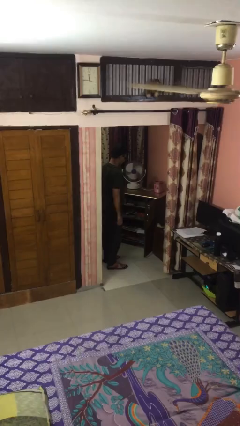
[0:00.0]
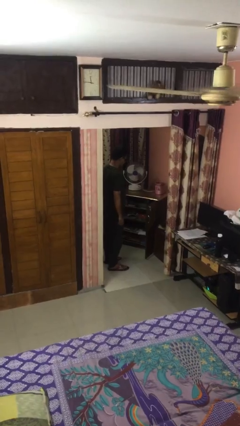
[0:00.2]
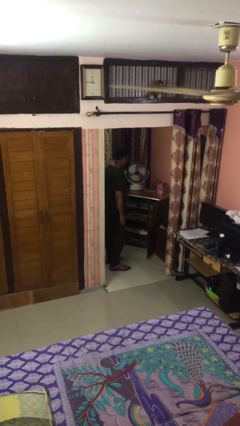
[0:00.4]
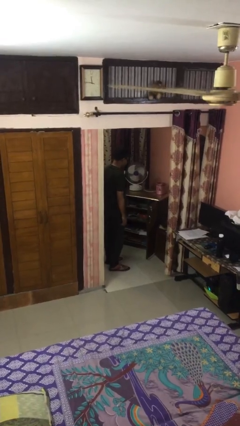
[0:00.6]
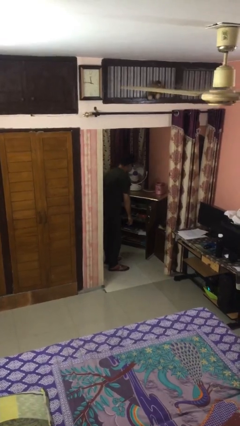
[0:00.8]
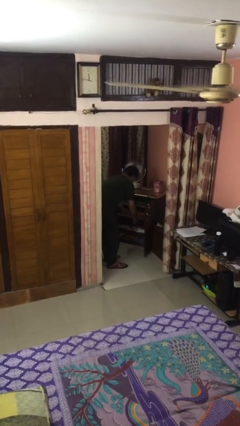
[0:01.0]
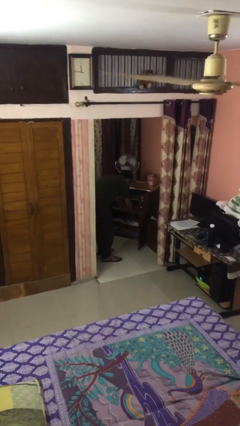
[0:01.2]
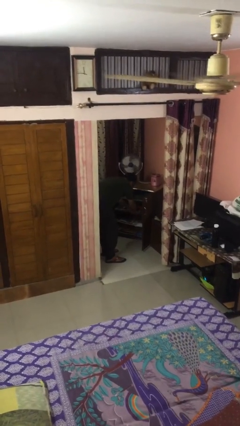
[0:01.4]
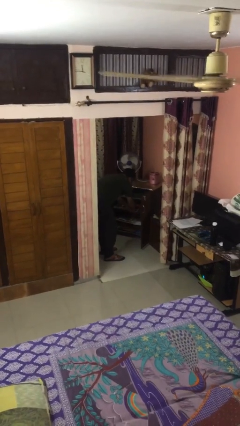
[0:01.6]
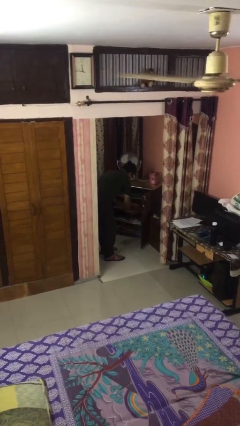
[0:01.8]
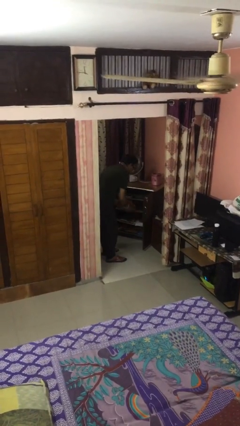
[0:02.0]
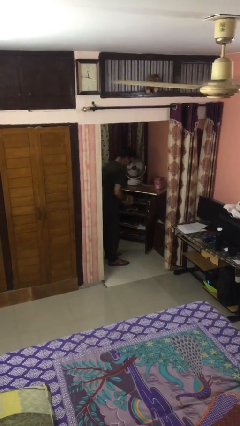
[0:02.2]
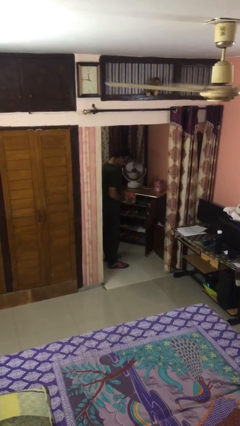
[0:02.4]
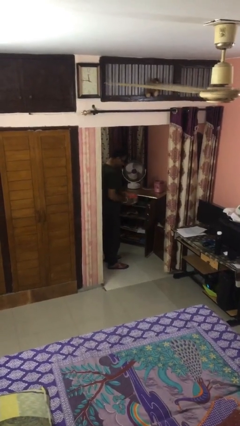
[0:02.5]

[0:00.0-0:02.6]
person picks up object from cabinet

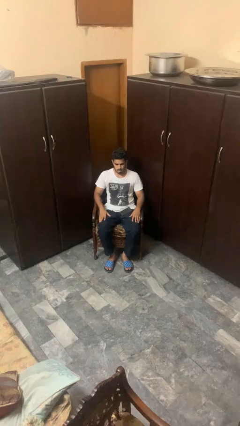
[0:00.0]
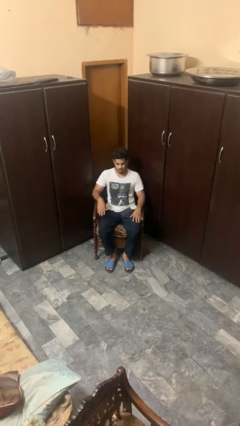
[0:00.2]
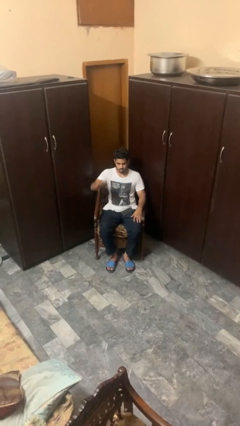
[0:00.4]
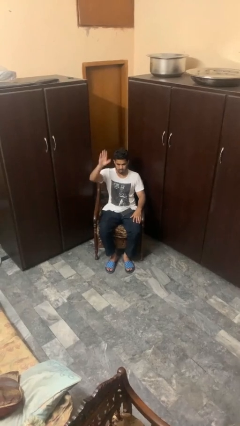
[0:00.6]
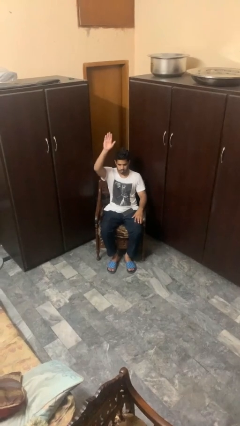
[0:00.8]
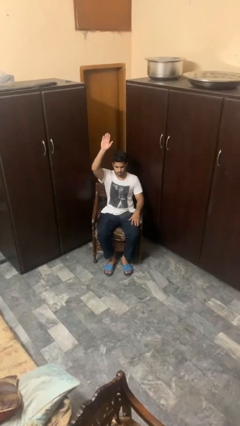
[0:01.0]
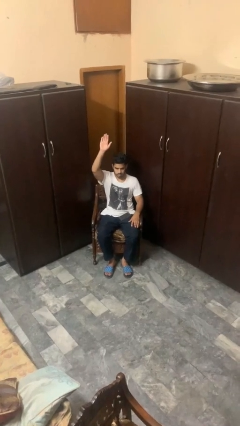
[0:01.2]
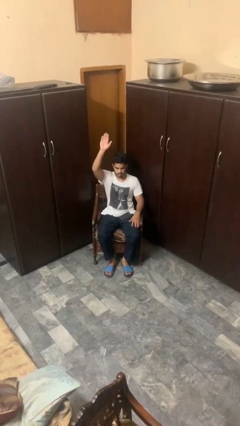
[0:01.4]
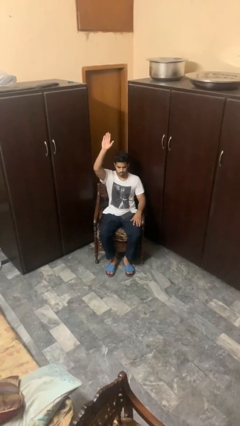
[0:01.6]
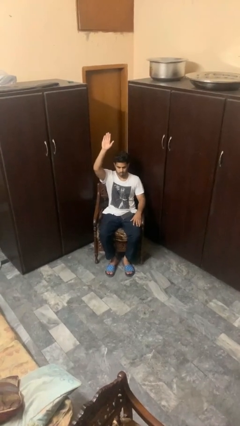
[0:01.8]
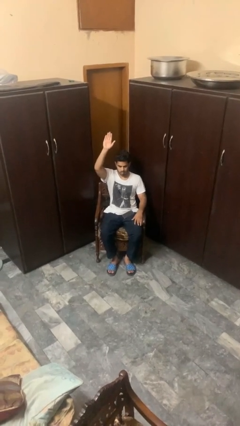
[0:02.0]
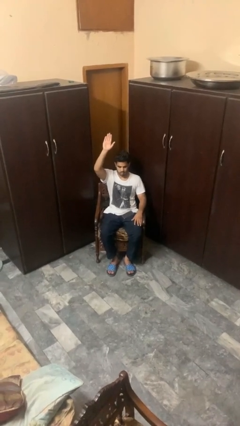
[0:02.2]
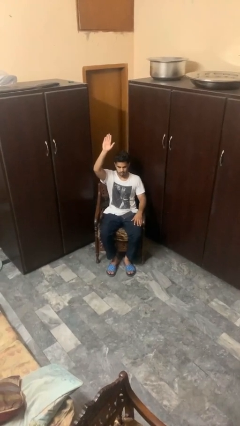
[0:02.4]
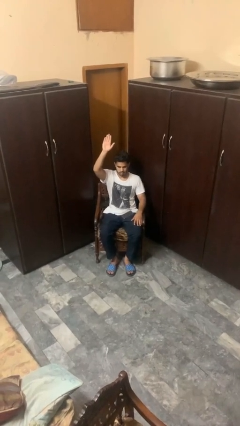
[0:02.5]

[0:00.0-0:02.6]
person gestures raise hand

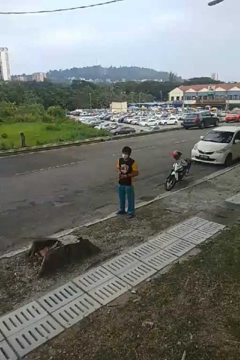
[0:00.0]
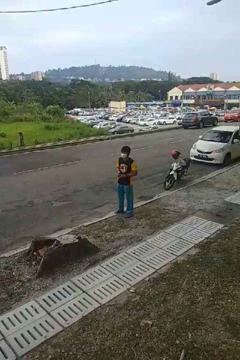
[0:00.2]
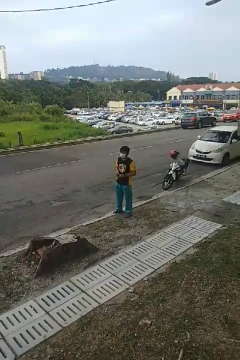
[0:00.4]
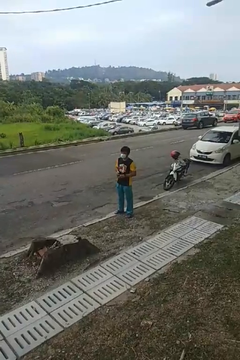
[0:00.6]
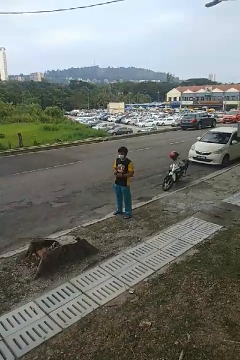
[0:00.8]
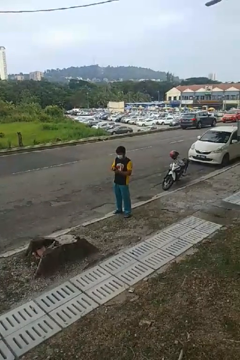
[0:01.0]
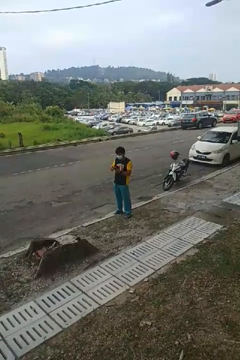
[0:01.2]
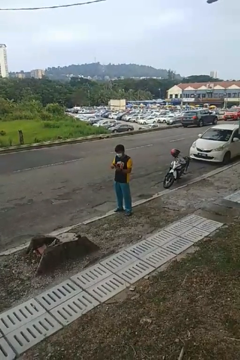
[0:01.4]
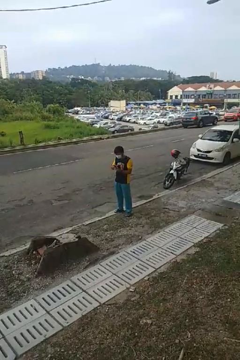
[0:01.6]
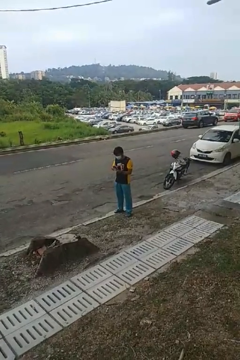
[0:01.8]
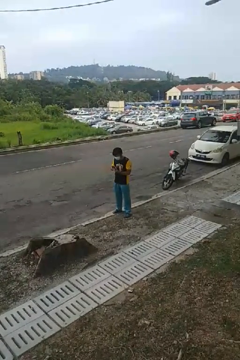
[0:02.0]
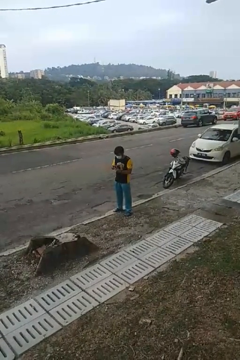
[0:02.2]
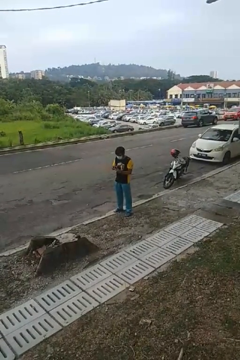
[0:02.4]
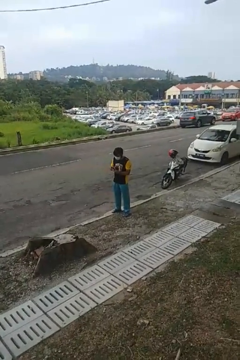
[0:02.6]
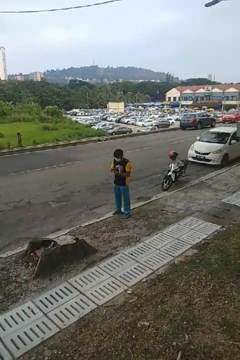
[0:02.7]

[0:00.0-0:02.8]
person searches in purse

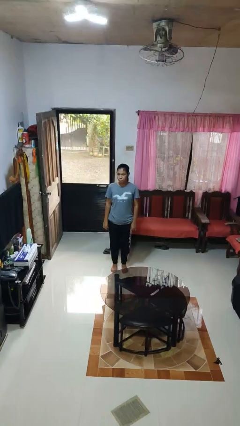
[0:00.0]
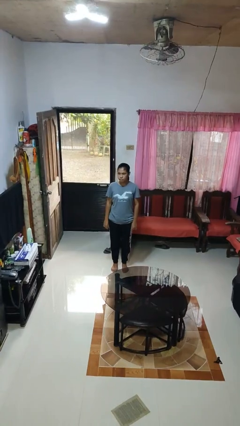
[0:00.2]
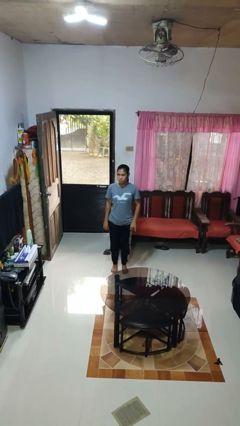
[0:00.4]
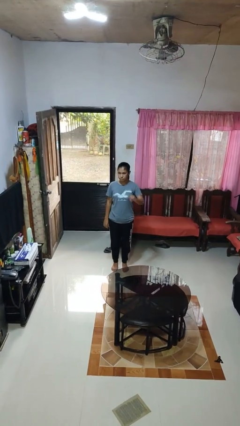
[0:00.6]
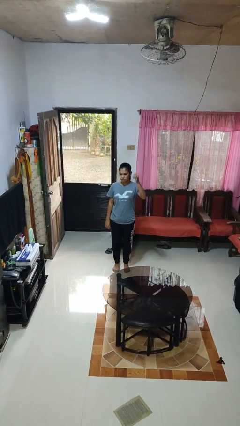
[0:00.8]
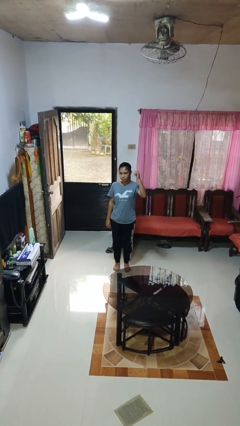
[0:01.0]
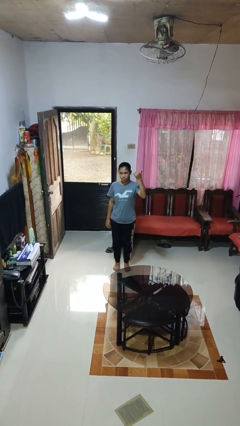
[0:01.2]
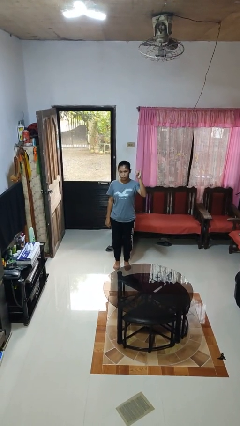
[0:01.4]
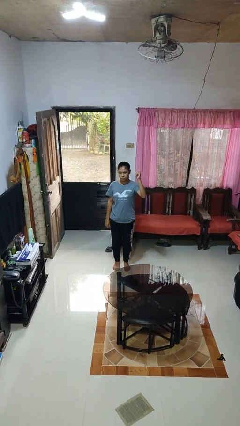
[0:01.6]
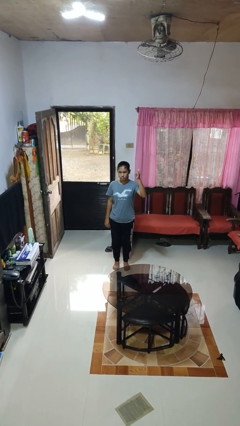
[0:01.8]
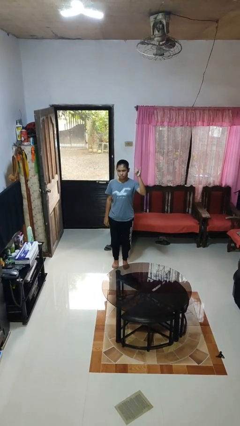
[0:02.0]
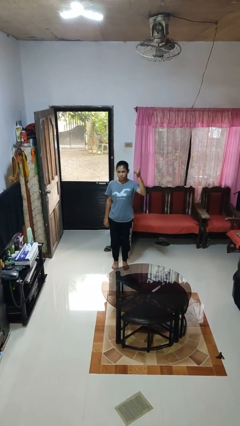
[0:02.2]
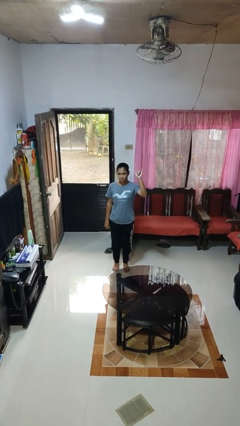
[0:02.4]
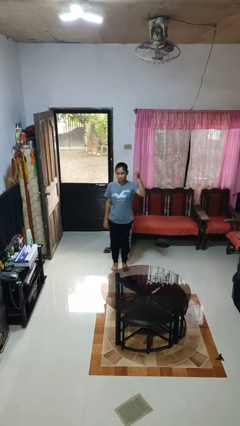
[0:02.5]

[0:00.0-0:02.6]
person gestures hang loose

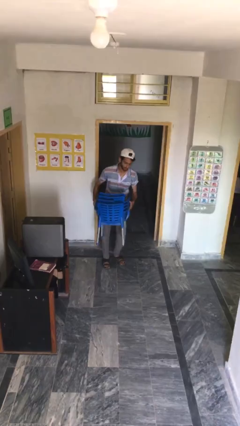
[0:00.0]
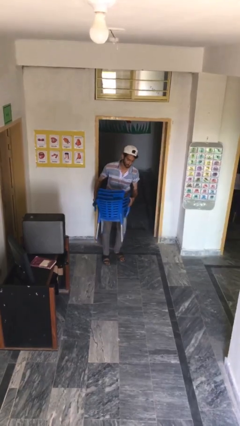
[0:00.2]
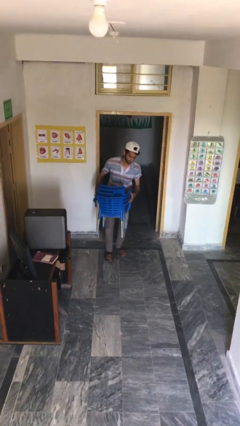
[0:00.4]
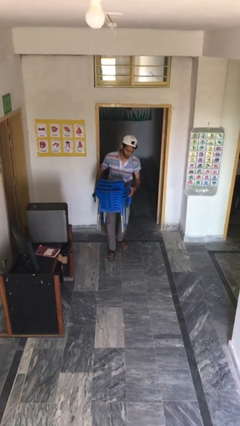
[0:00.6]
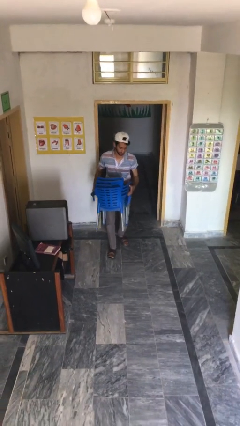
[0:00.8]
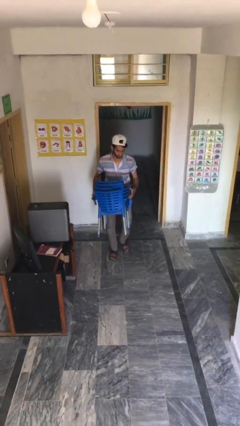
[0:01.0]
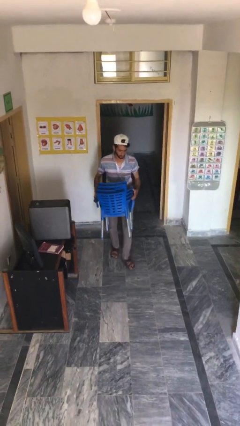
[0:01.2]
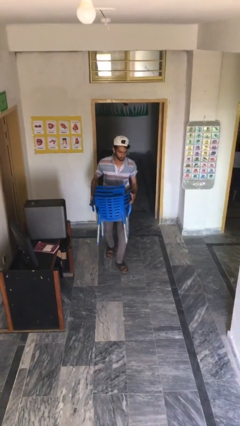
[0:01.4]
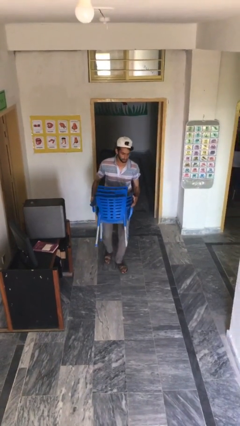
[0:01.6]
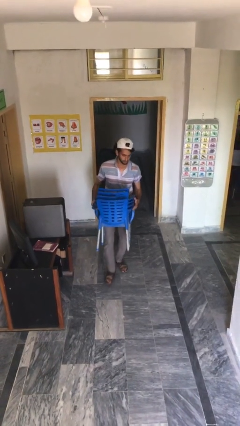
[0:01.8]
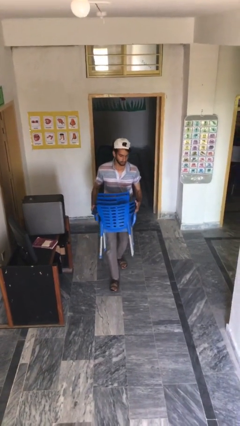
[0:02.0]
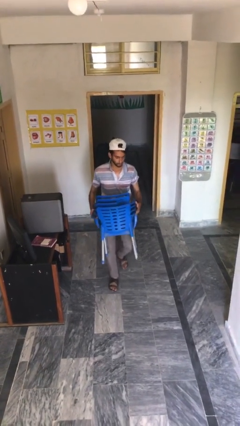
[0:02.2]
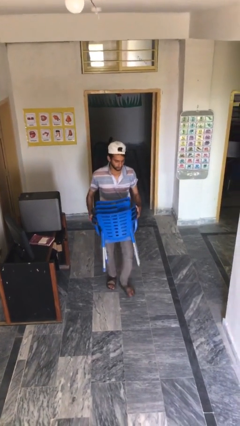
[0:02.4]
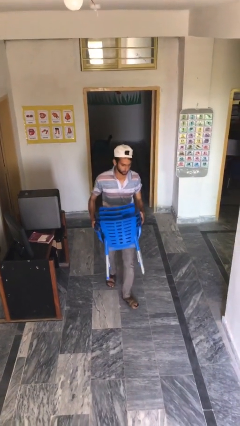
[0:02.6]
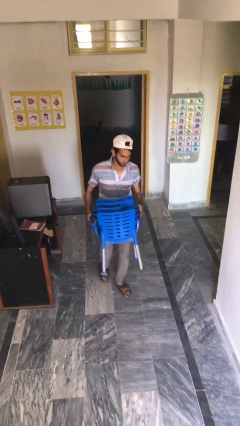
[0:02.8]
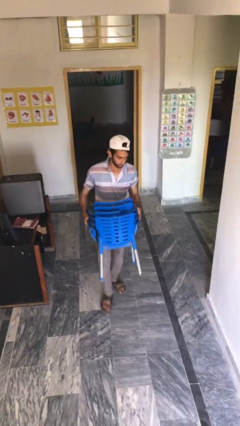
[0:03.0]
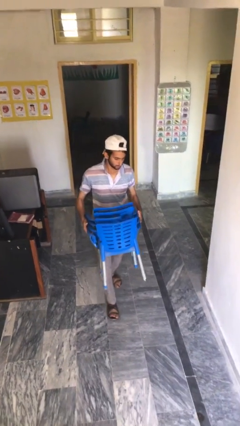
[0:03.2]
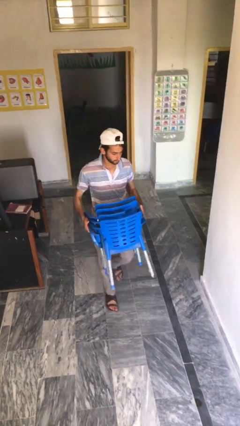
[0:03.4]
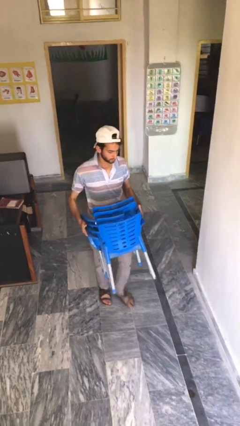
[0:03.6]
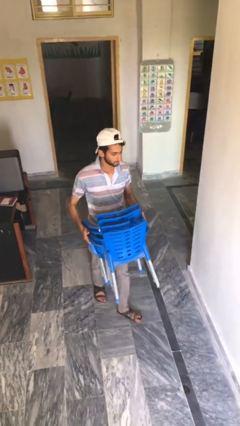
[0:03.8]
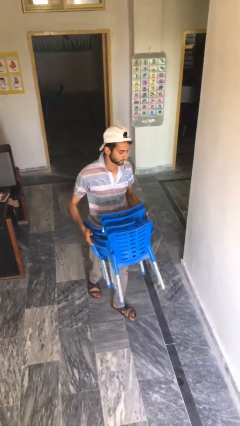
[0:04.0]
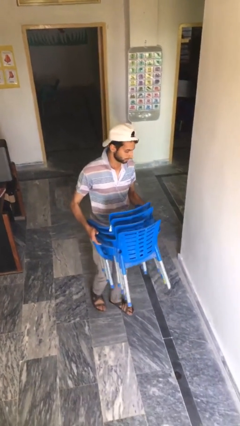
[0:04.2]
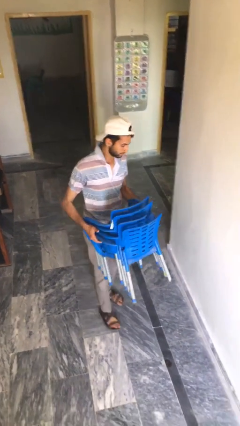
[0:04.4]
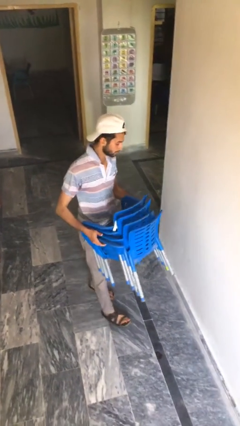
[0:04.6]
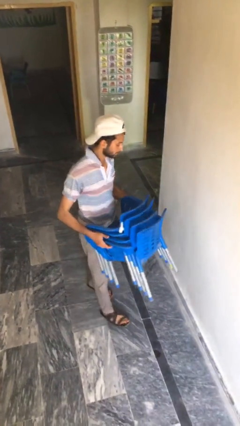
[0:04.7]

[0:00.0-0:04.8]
person carries heavy object

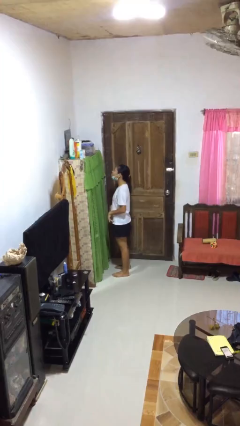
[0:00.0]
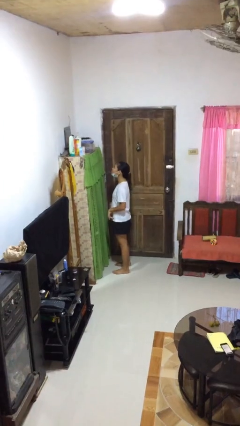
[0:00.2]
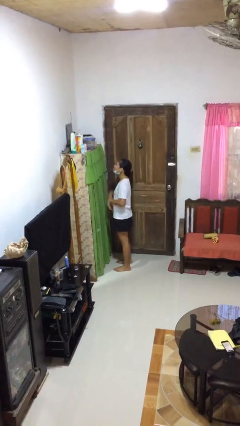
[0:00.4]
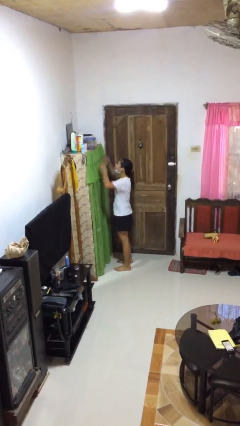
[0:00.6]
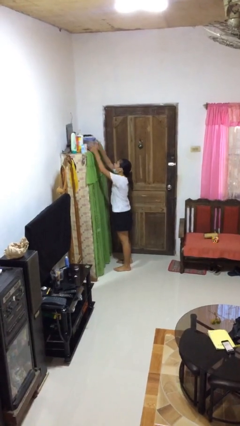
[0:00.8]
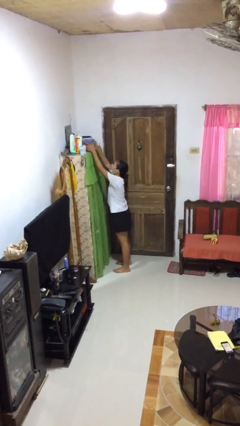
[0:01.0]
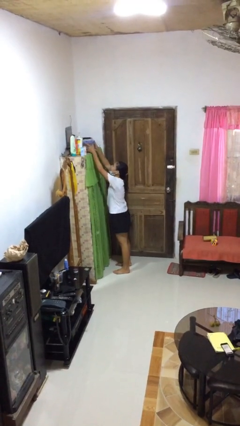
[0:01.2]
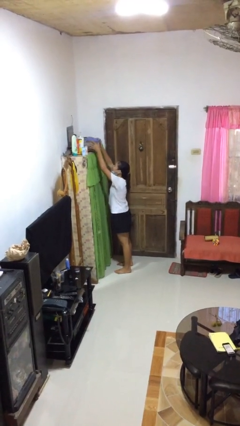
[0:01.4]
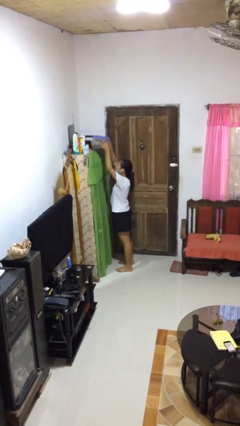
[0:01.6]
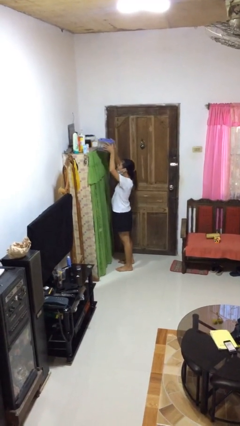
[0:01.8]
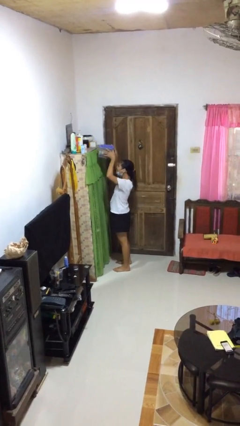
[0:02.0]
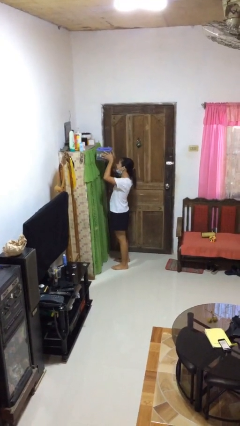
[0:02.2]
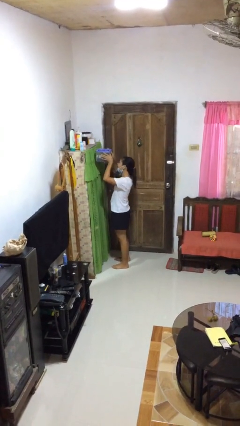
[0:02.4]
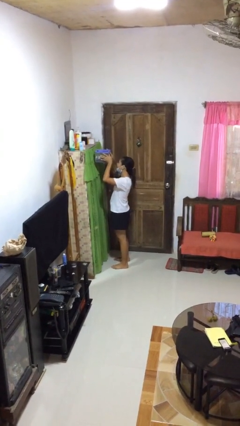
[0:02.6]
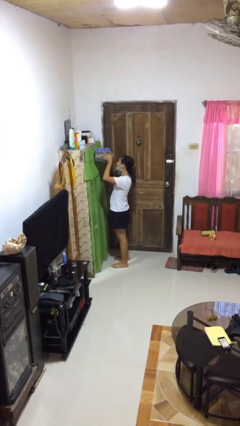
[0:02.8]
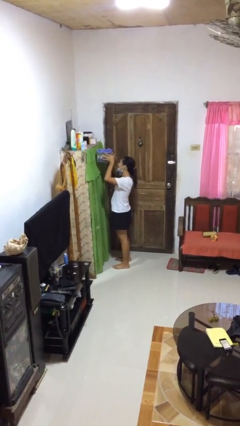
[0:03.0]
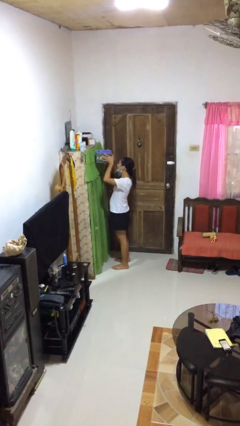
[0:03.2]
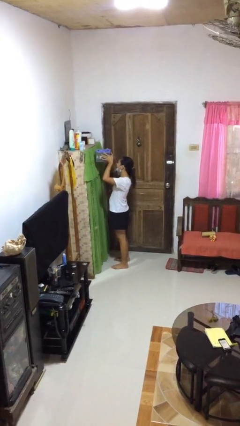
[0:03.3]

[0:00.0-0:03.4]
person picks up object from shelf
